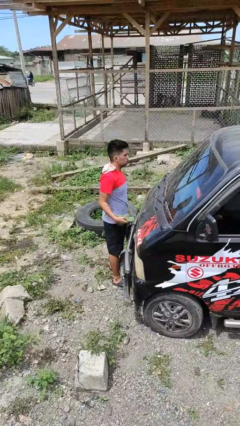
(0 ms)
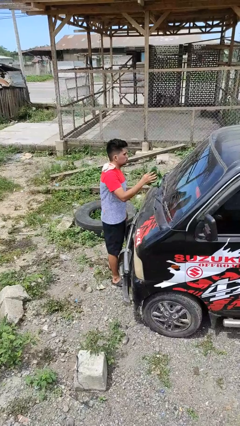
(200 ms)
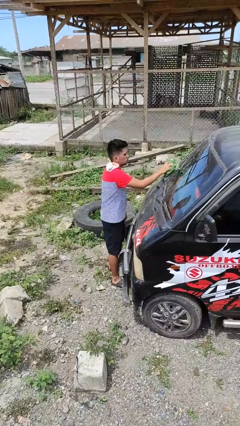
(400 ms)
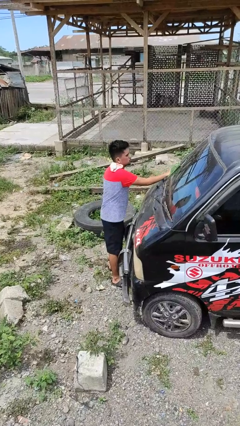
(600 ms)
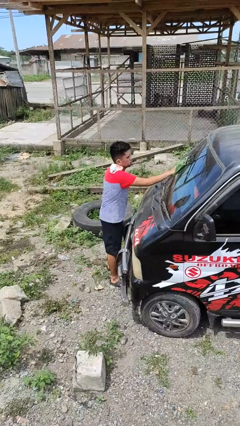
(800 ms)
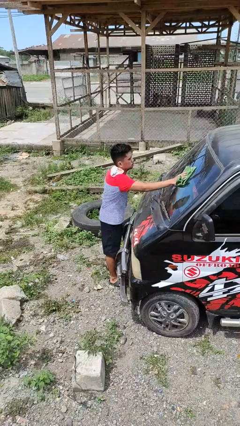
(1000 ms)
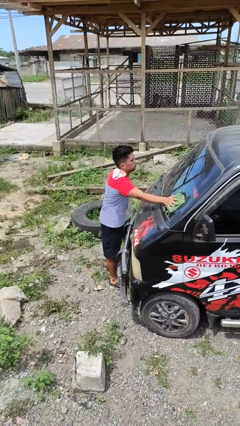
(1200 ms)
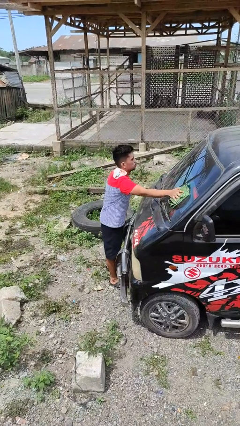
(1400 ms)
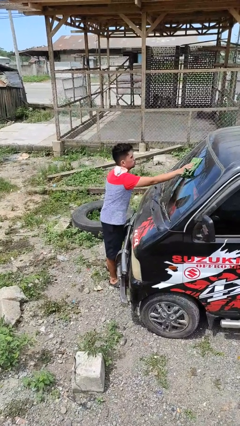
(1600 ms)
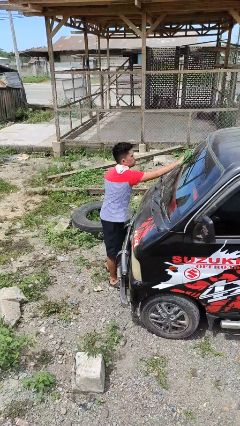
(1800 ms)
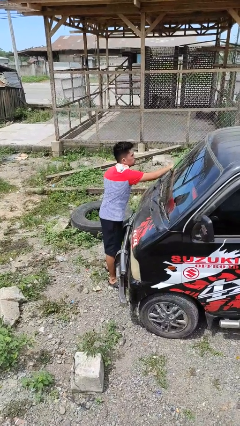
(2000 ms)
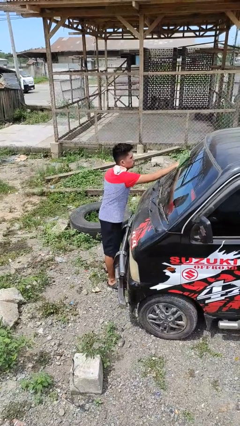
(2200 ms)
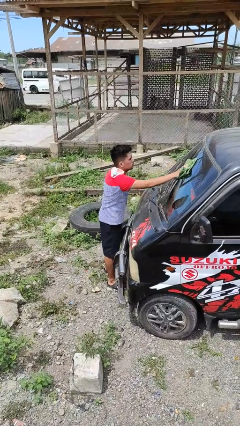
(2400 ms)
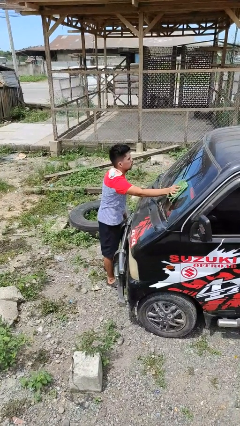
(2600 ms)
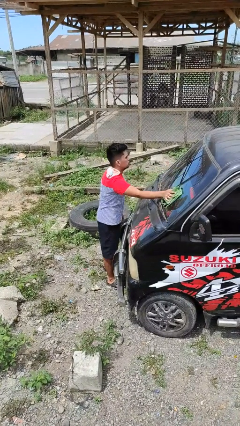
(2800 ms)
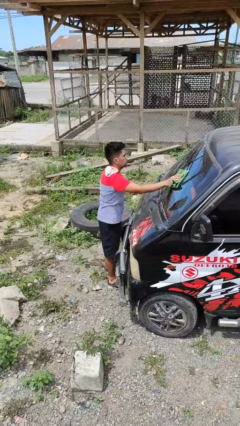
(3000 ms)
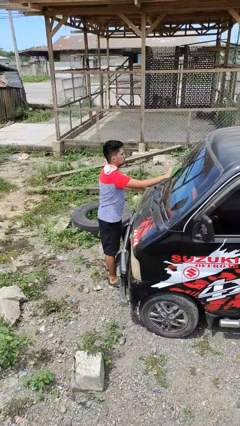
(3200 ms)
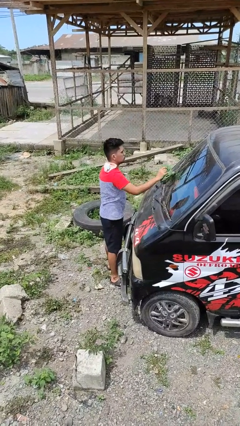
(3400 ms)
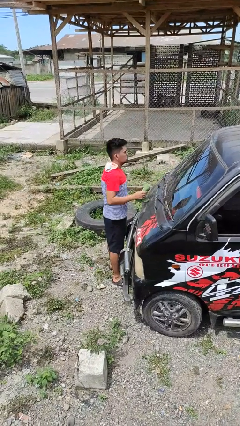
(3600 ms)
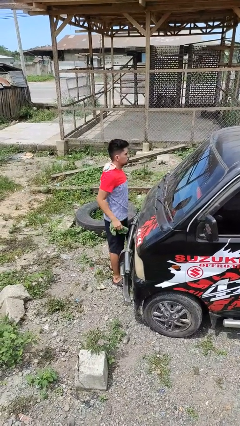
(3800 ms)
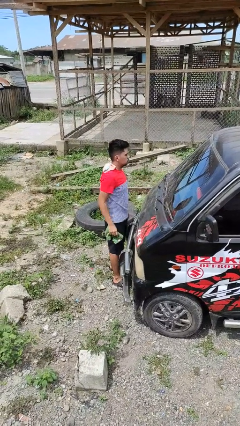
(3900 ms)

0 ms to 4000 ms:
person polishes car with rag

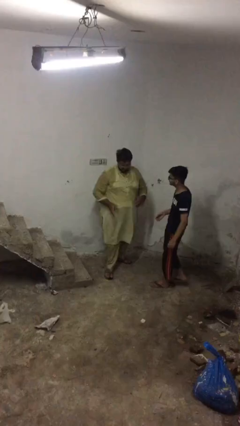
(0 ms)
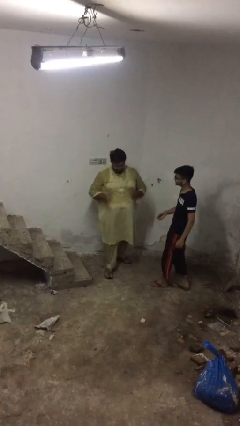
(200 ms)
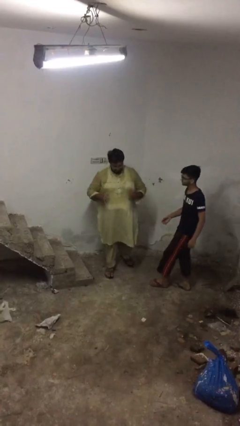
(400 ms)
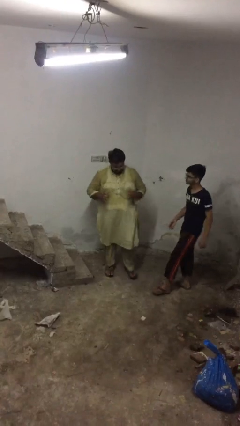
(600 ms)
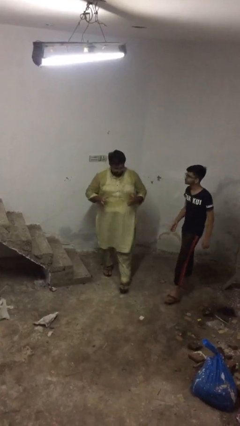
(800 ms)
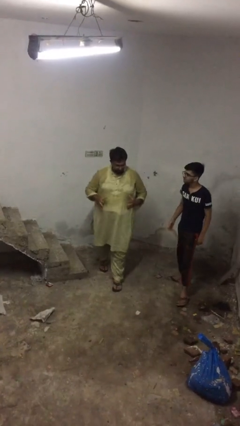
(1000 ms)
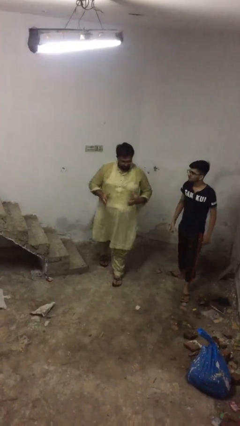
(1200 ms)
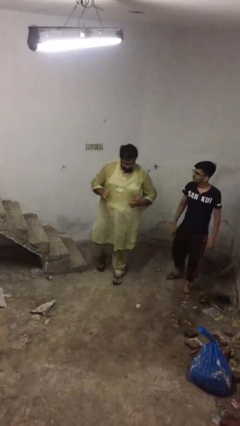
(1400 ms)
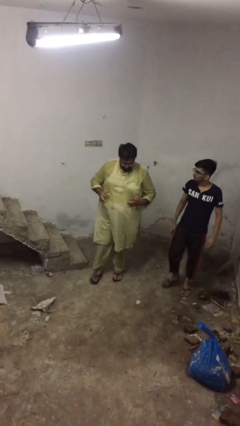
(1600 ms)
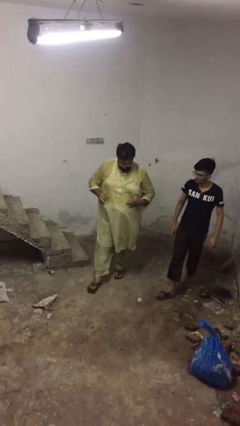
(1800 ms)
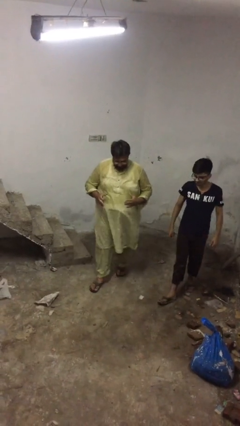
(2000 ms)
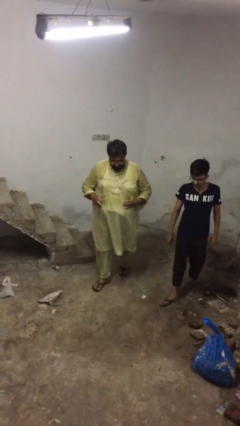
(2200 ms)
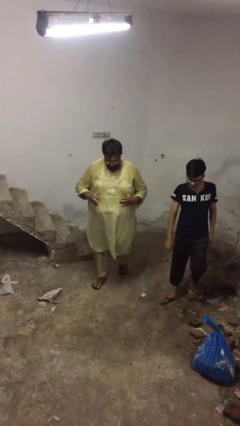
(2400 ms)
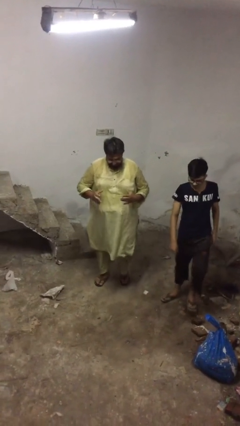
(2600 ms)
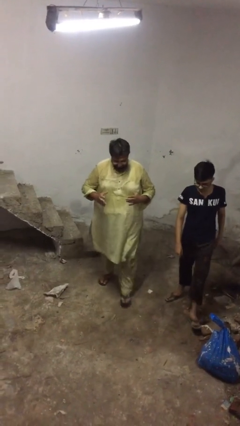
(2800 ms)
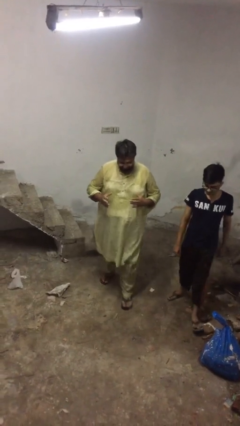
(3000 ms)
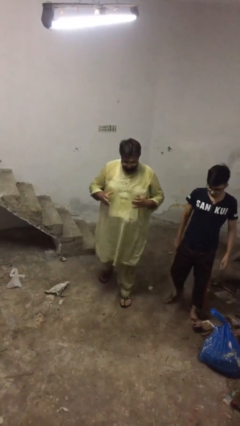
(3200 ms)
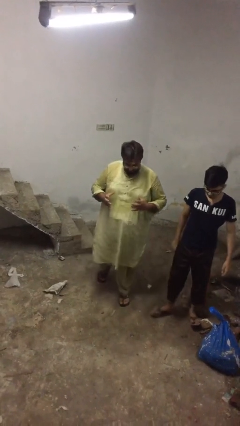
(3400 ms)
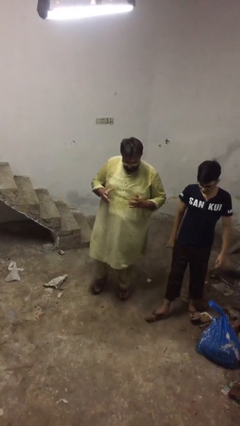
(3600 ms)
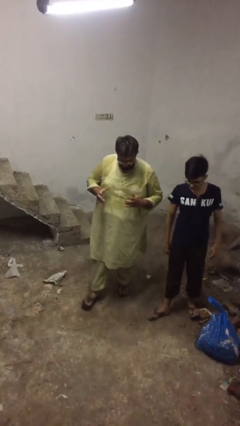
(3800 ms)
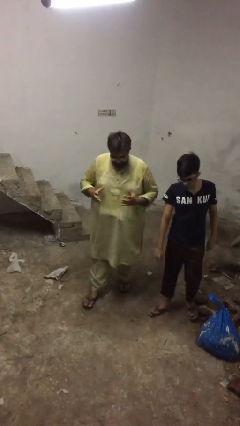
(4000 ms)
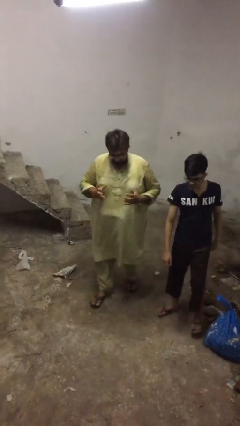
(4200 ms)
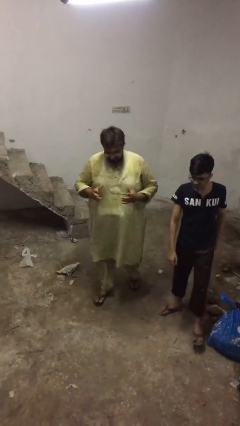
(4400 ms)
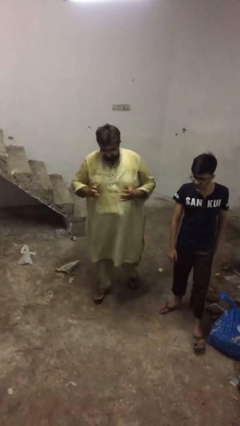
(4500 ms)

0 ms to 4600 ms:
person talks to person

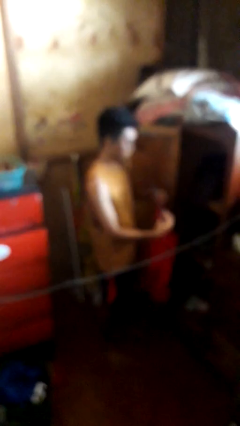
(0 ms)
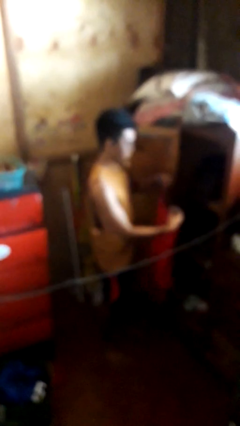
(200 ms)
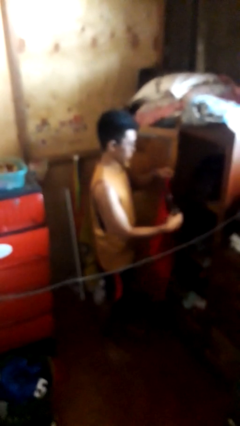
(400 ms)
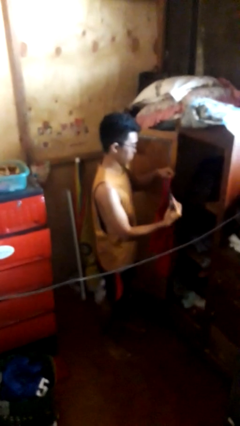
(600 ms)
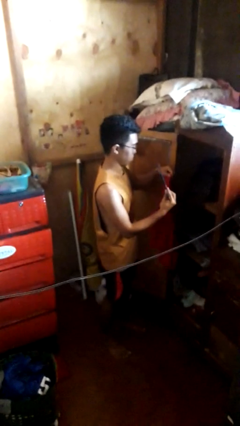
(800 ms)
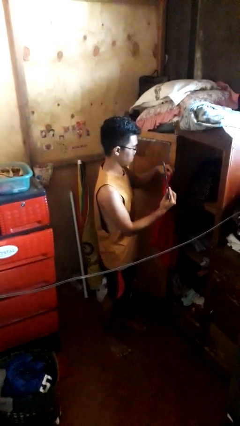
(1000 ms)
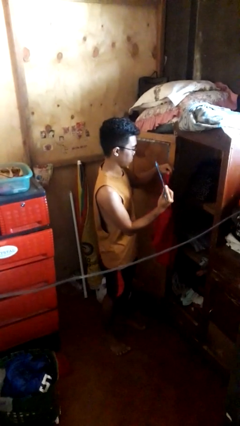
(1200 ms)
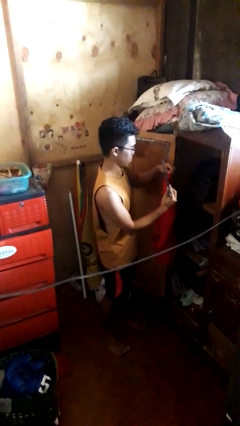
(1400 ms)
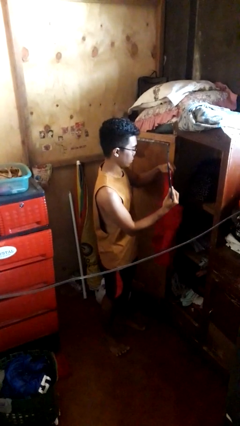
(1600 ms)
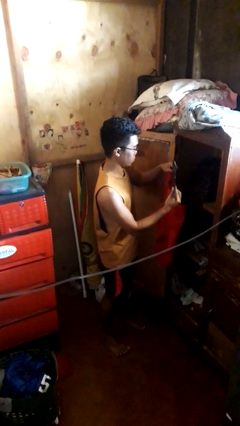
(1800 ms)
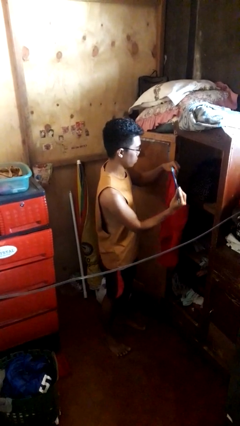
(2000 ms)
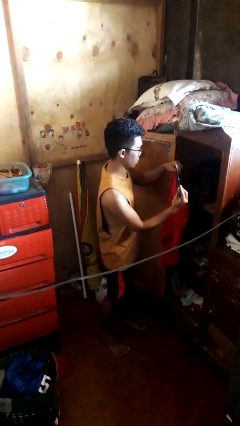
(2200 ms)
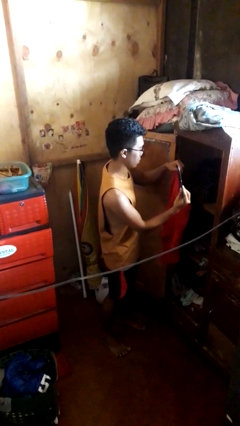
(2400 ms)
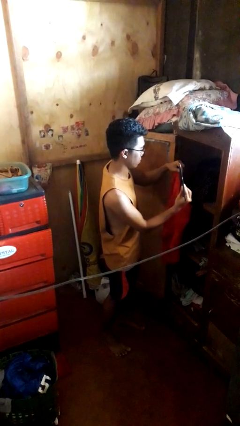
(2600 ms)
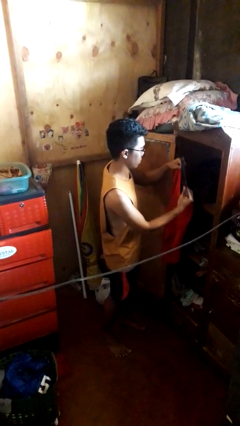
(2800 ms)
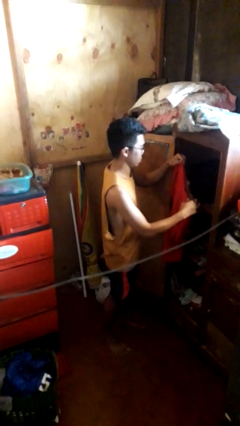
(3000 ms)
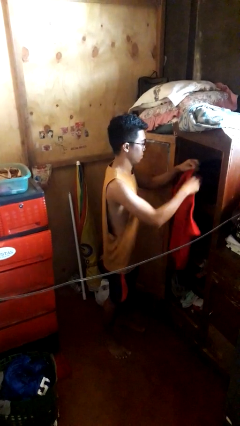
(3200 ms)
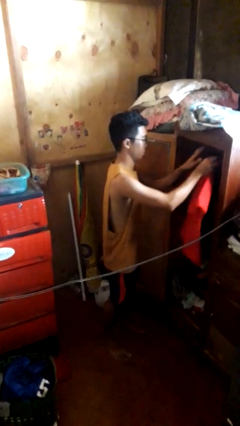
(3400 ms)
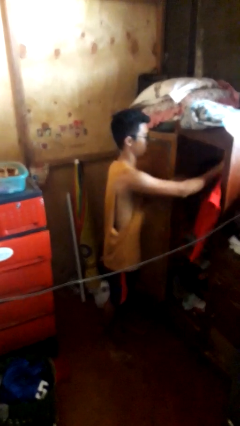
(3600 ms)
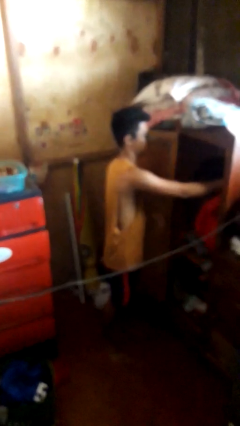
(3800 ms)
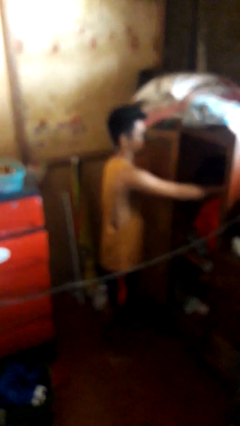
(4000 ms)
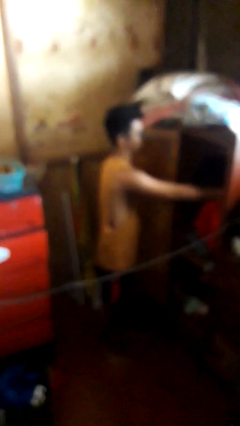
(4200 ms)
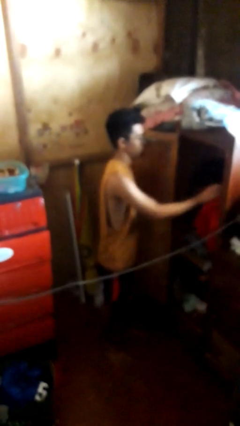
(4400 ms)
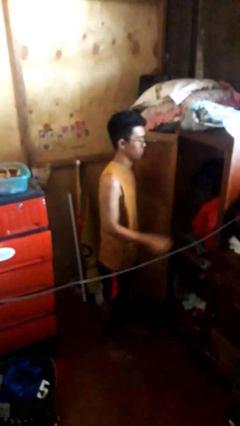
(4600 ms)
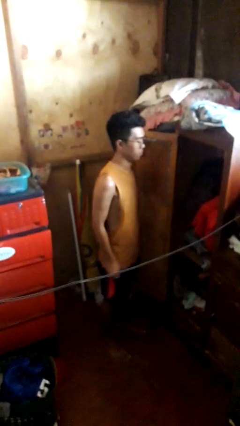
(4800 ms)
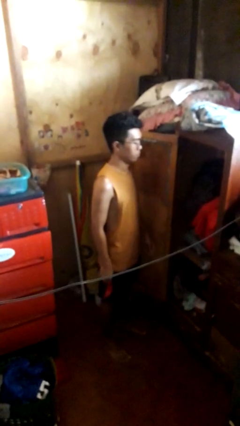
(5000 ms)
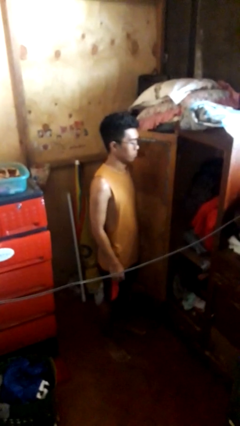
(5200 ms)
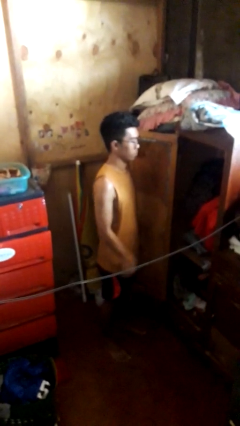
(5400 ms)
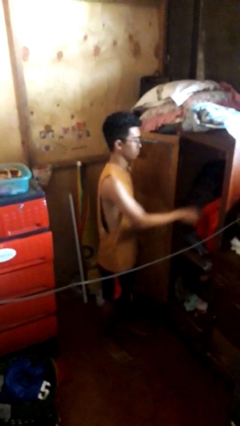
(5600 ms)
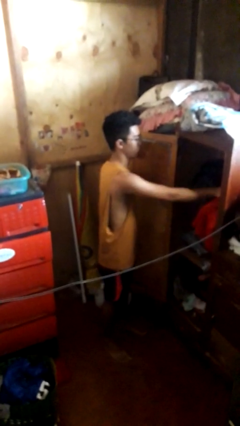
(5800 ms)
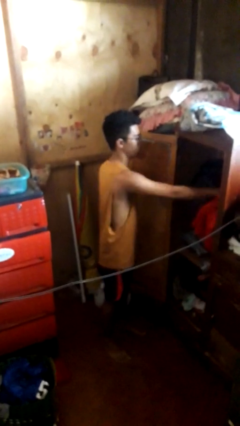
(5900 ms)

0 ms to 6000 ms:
person puts clothes into closet

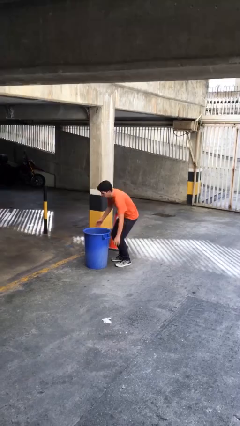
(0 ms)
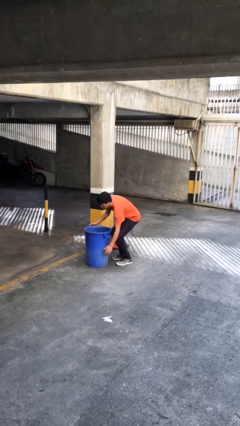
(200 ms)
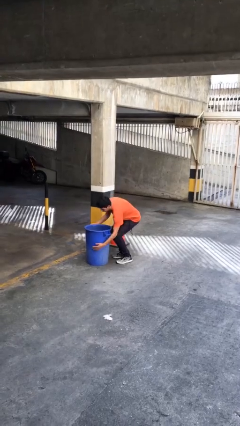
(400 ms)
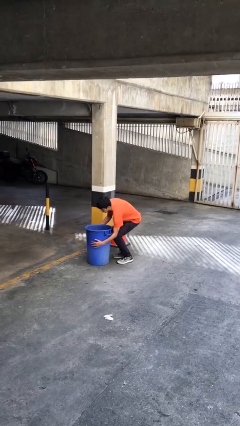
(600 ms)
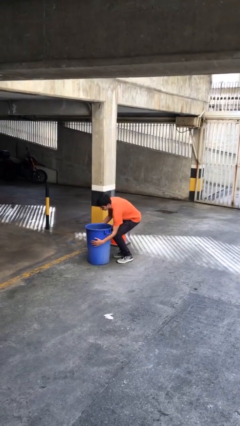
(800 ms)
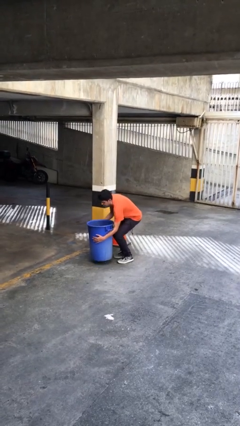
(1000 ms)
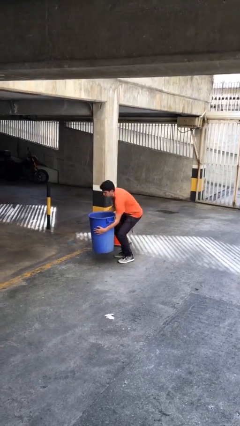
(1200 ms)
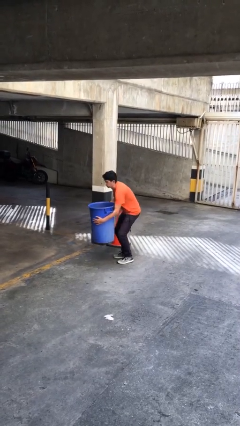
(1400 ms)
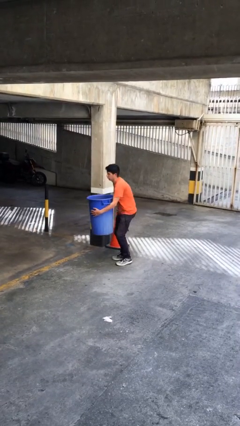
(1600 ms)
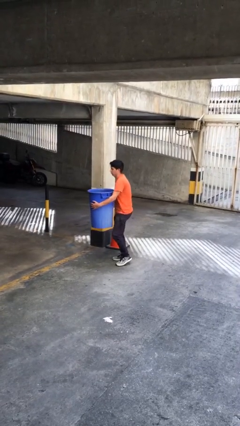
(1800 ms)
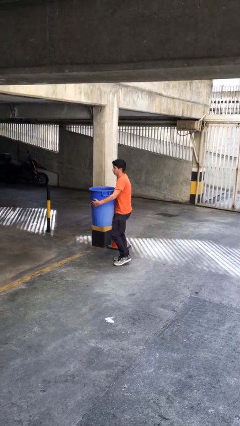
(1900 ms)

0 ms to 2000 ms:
person picks up object from floor

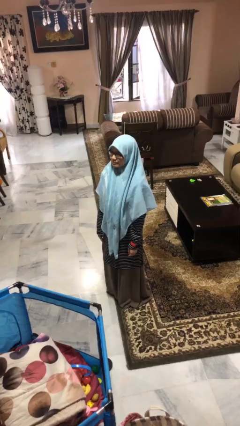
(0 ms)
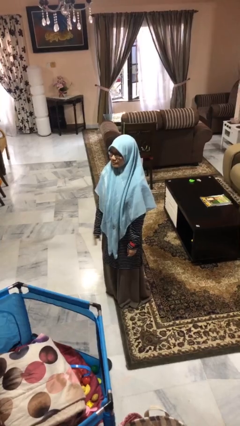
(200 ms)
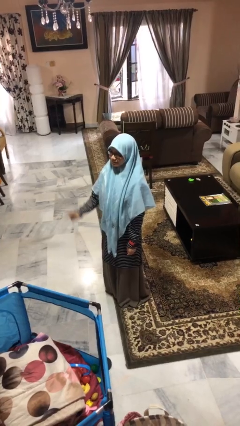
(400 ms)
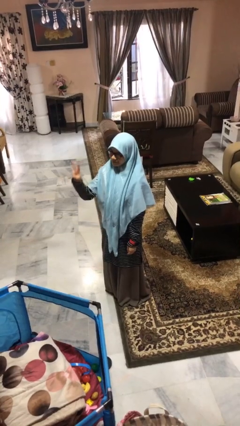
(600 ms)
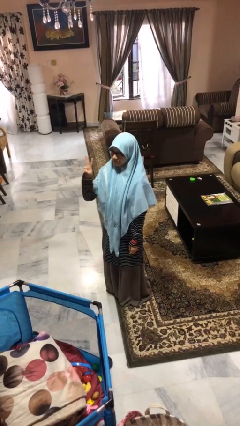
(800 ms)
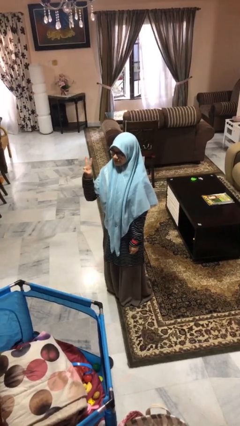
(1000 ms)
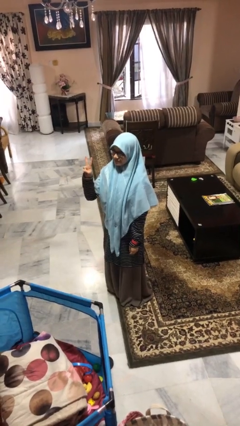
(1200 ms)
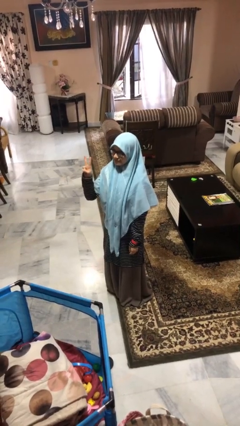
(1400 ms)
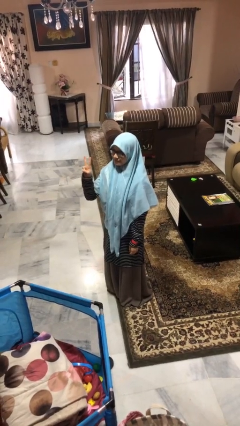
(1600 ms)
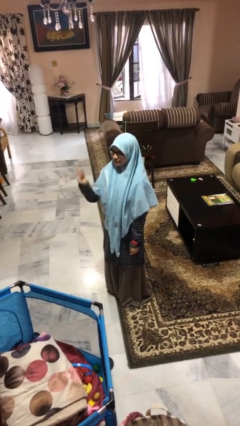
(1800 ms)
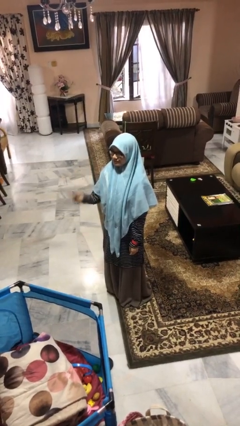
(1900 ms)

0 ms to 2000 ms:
person gestures peace
